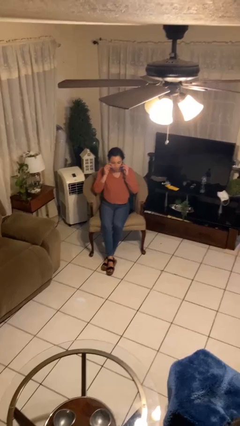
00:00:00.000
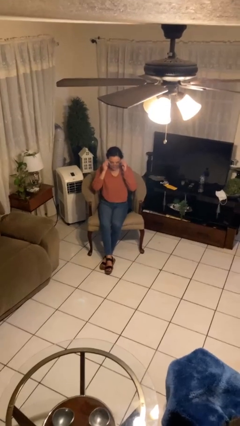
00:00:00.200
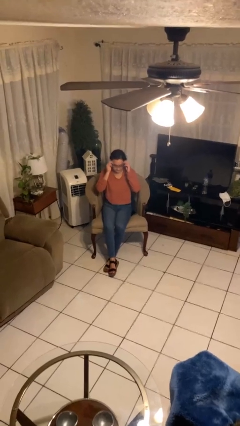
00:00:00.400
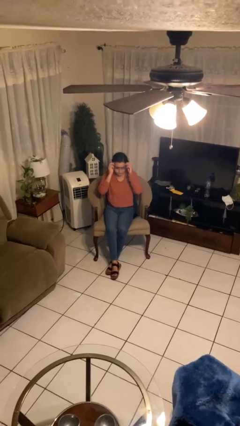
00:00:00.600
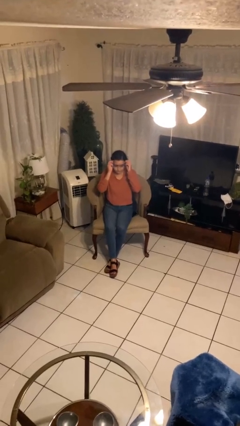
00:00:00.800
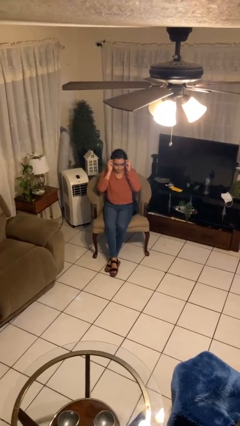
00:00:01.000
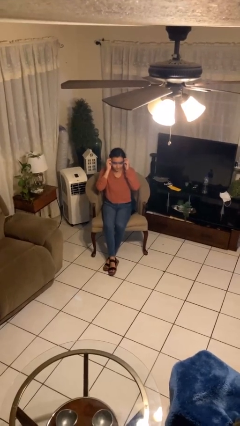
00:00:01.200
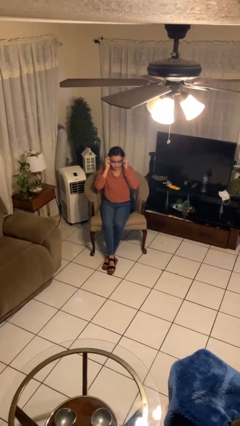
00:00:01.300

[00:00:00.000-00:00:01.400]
person puts on glasses

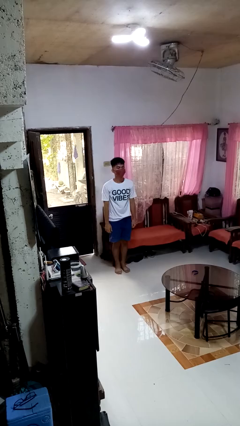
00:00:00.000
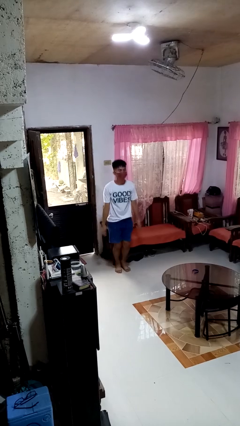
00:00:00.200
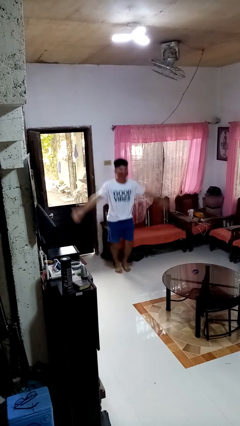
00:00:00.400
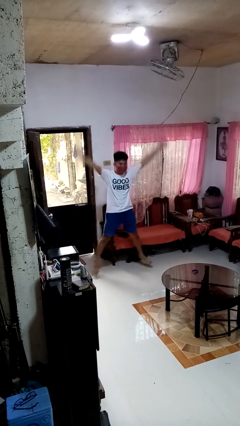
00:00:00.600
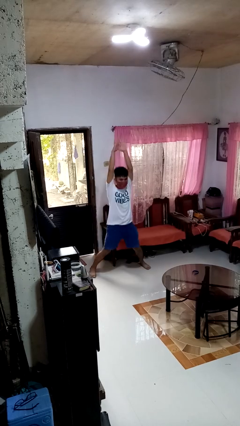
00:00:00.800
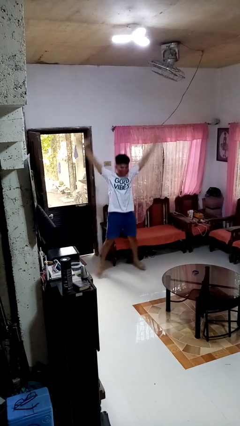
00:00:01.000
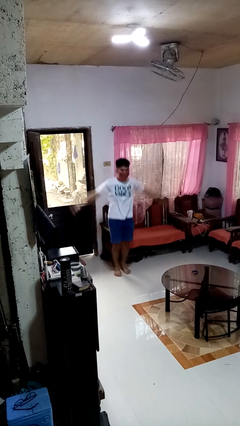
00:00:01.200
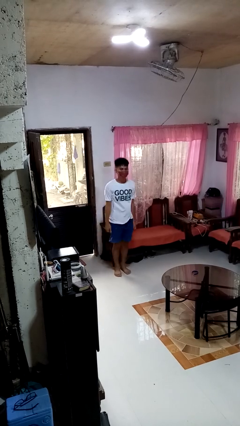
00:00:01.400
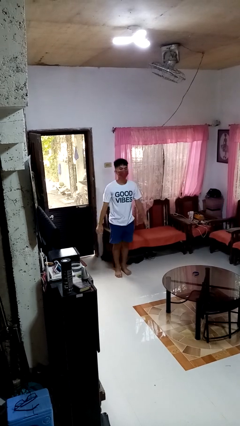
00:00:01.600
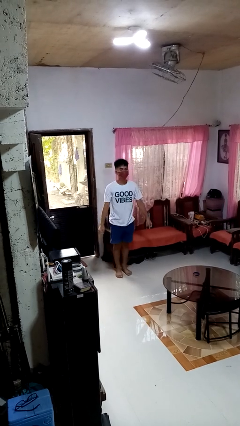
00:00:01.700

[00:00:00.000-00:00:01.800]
person exercises with jumping jacks

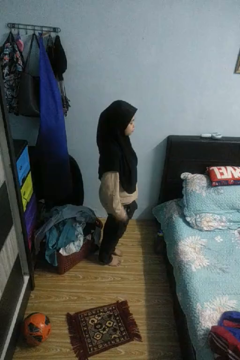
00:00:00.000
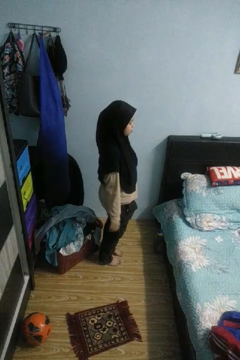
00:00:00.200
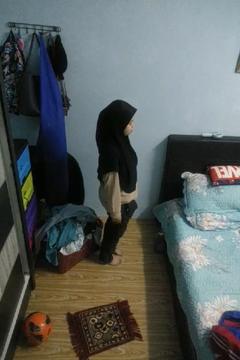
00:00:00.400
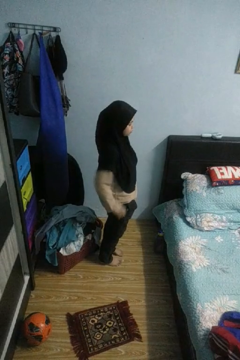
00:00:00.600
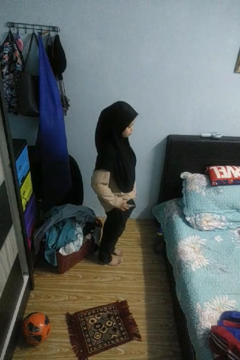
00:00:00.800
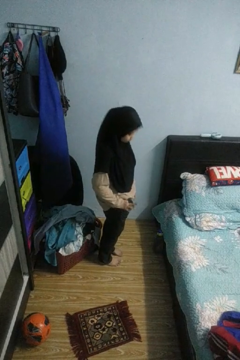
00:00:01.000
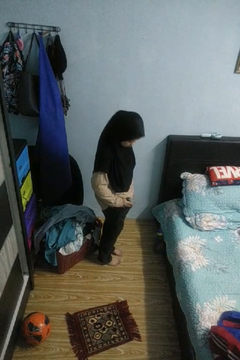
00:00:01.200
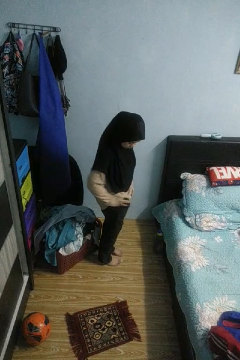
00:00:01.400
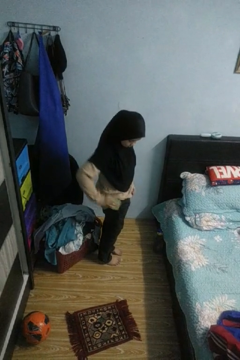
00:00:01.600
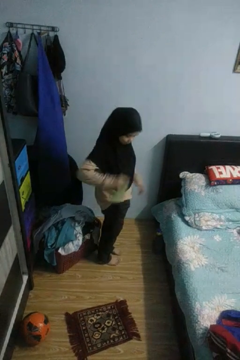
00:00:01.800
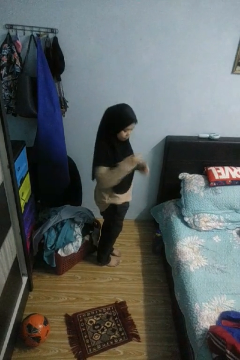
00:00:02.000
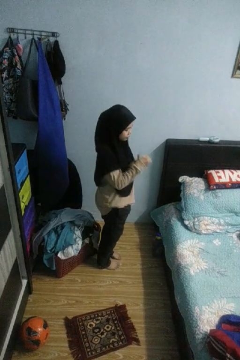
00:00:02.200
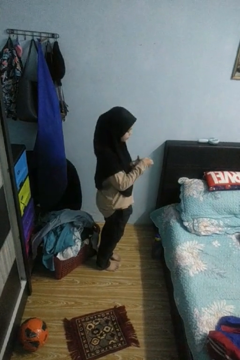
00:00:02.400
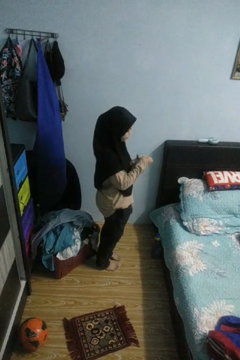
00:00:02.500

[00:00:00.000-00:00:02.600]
person takes phone from pocket

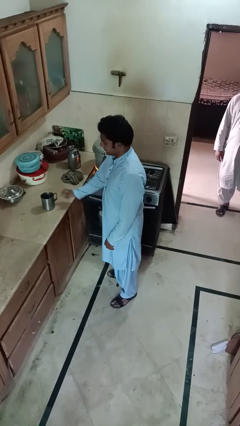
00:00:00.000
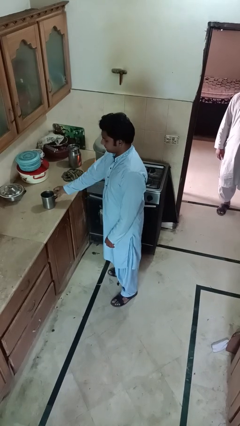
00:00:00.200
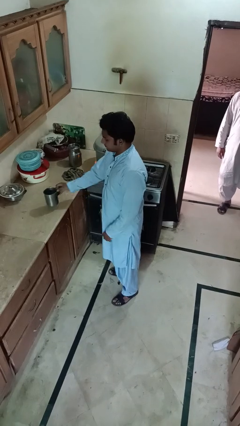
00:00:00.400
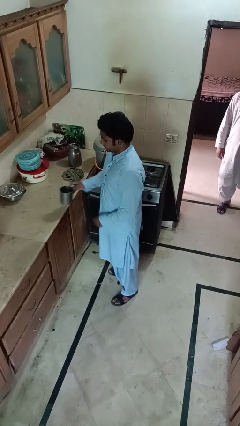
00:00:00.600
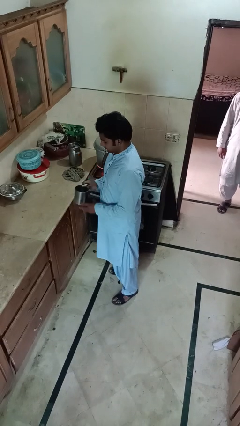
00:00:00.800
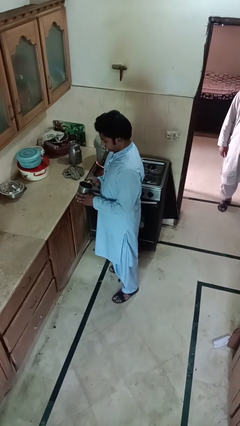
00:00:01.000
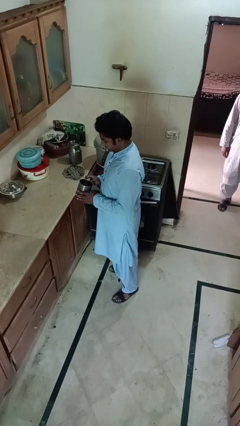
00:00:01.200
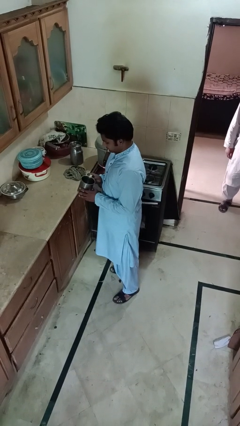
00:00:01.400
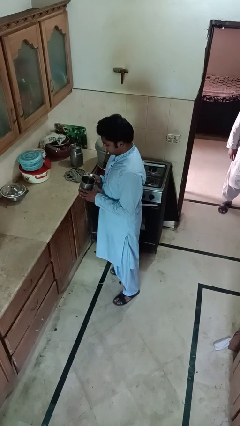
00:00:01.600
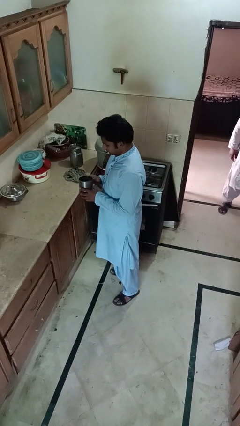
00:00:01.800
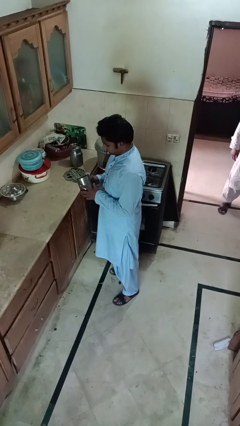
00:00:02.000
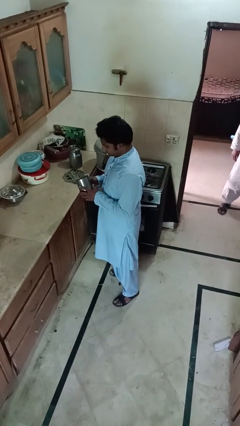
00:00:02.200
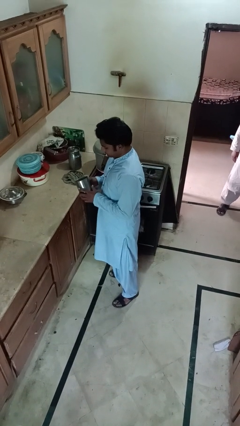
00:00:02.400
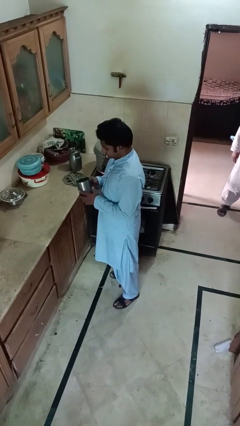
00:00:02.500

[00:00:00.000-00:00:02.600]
person picks up object from countertop

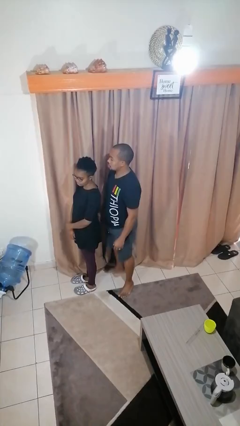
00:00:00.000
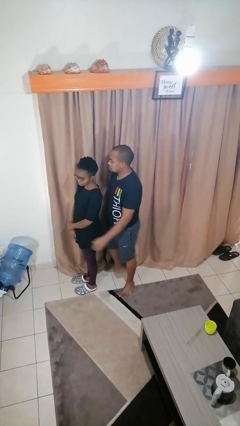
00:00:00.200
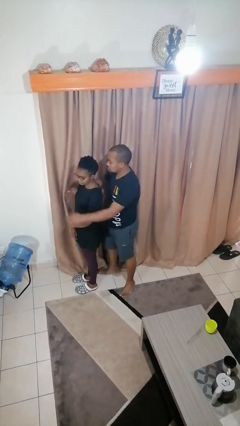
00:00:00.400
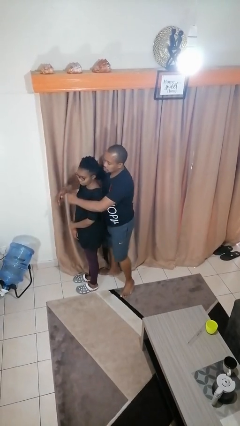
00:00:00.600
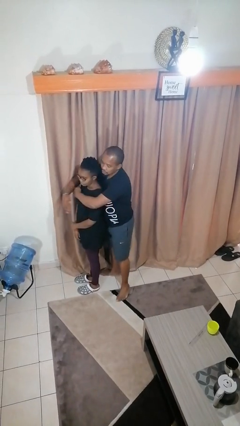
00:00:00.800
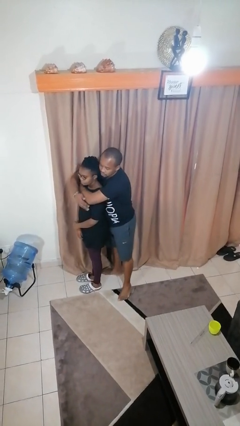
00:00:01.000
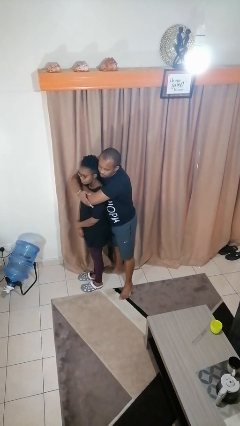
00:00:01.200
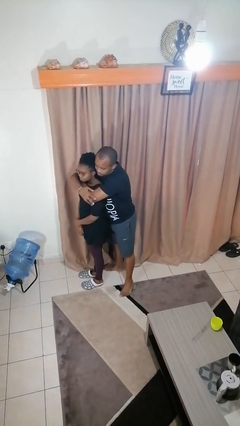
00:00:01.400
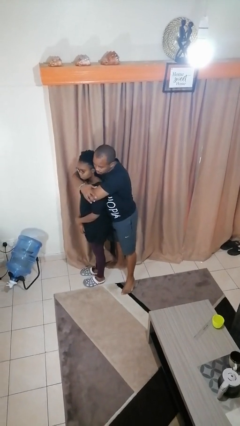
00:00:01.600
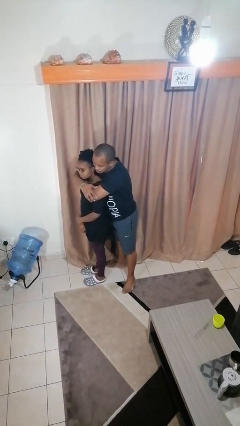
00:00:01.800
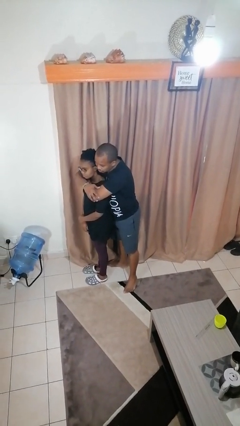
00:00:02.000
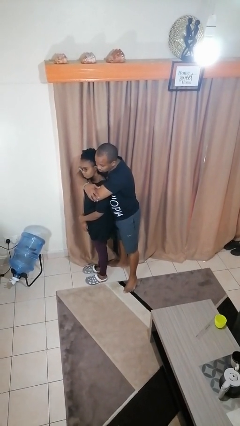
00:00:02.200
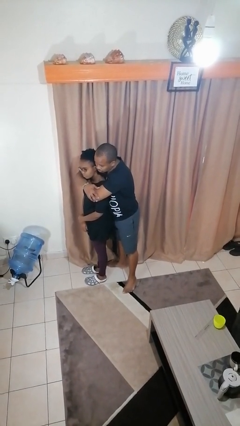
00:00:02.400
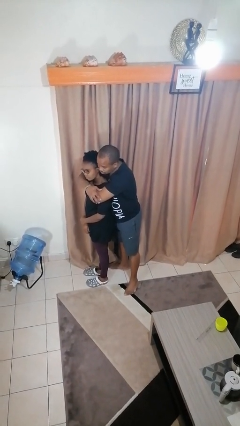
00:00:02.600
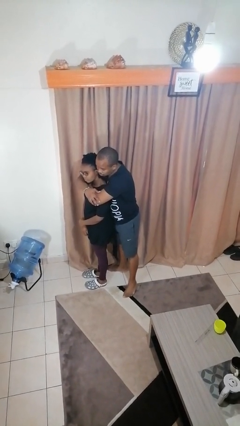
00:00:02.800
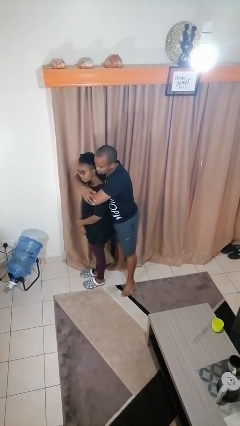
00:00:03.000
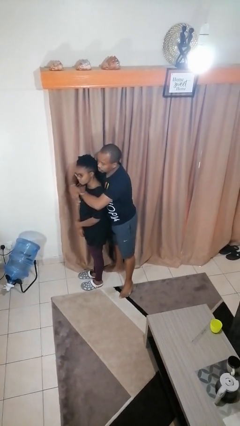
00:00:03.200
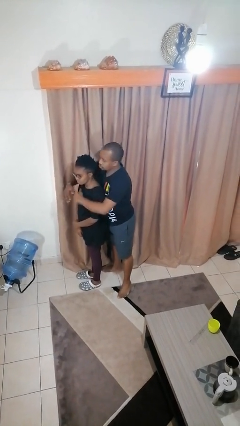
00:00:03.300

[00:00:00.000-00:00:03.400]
person hugs person from behind

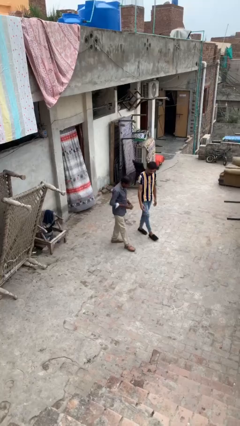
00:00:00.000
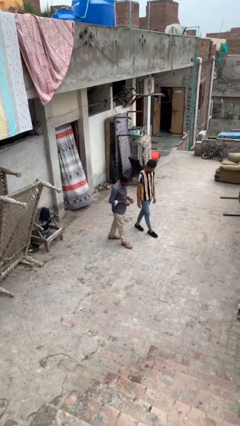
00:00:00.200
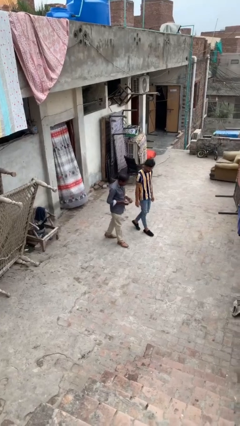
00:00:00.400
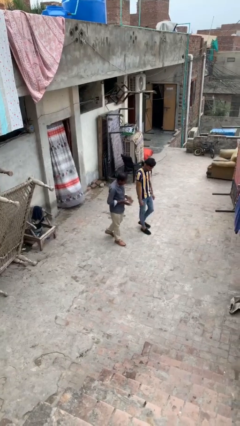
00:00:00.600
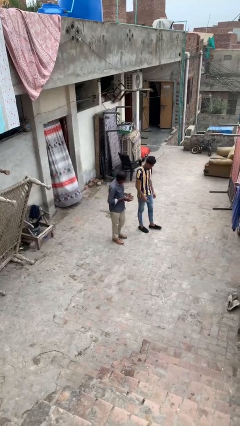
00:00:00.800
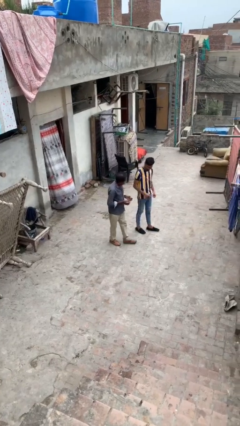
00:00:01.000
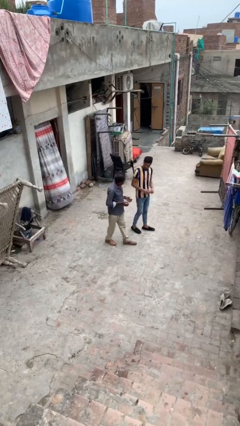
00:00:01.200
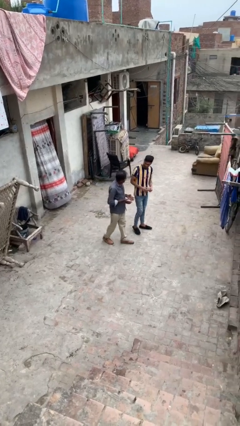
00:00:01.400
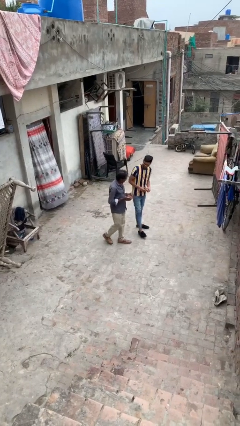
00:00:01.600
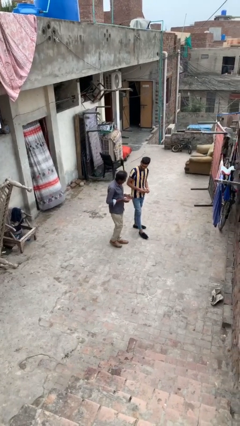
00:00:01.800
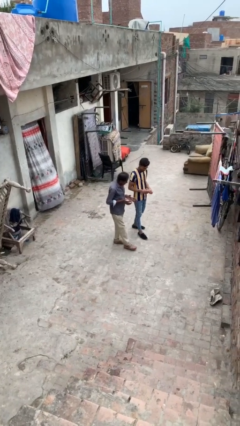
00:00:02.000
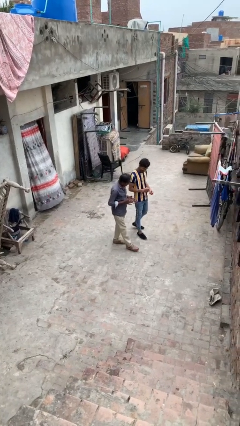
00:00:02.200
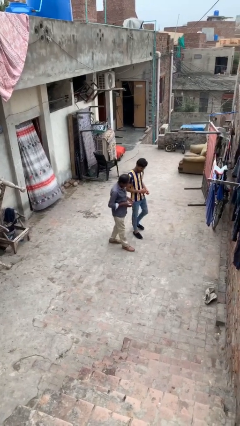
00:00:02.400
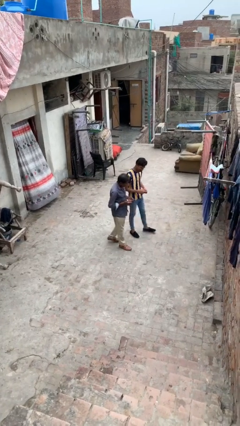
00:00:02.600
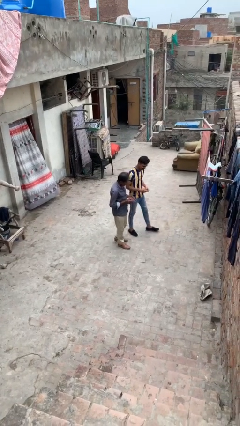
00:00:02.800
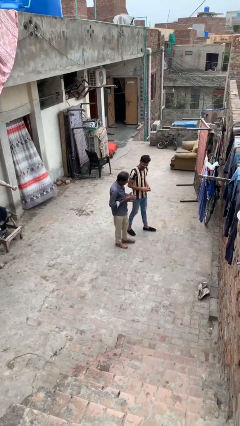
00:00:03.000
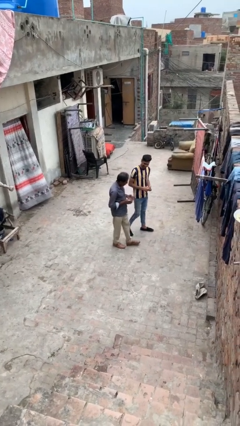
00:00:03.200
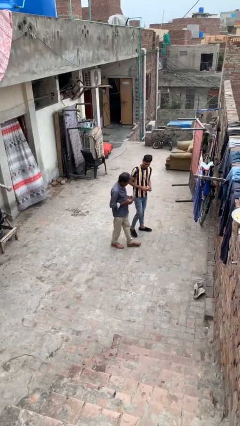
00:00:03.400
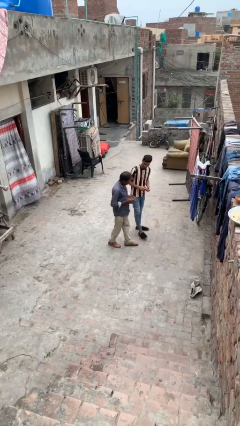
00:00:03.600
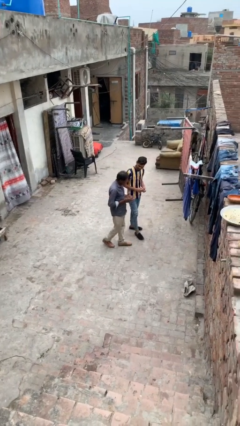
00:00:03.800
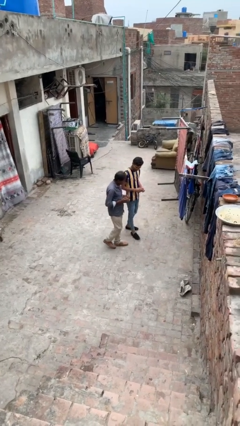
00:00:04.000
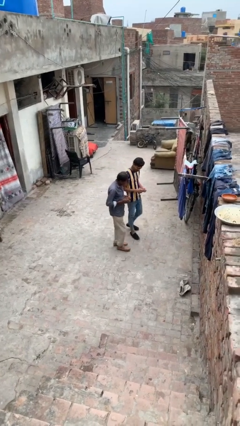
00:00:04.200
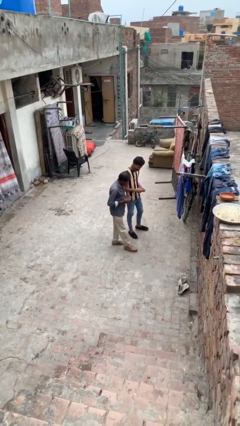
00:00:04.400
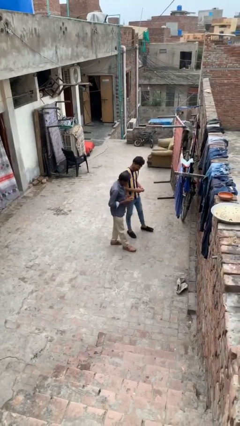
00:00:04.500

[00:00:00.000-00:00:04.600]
person talks to person

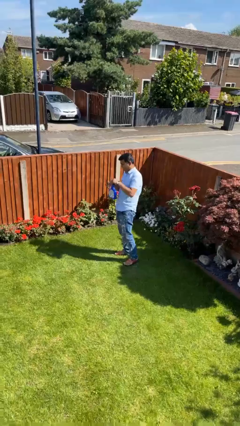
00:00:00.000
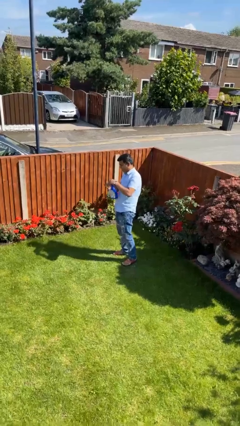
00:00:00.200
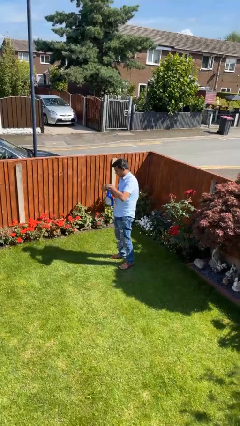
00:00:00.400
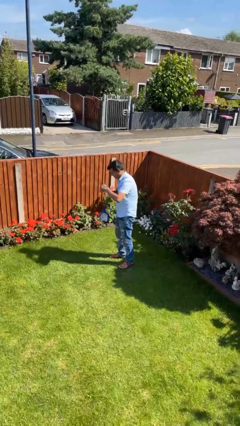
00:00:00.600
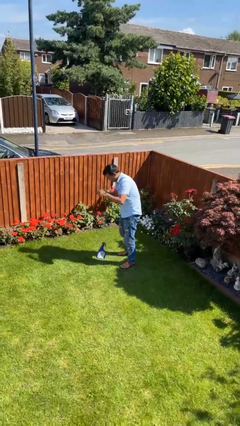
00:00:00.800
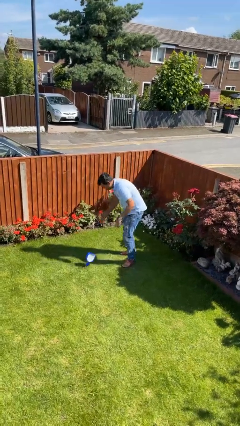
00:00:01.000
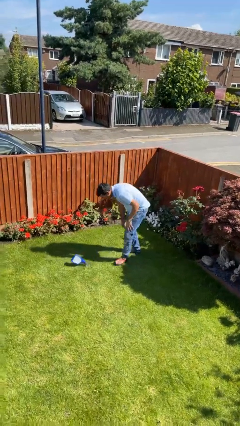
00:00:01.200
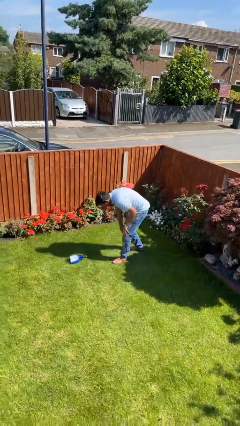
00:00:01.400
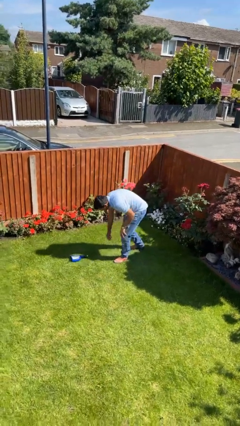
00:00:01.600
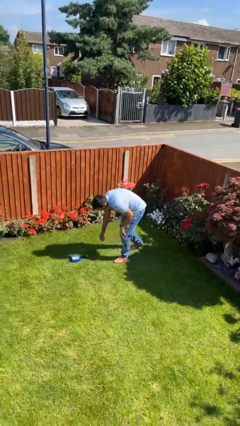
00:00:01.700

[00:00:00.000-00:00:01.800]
person drops object
